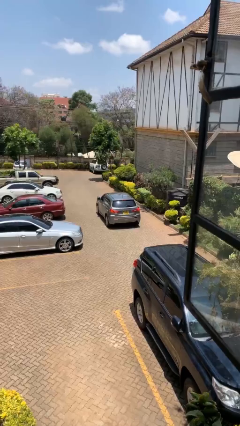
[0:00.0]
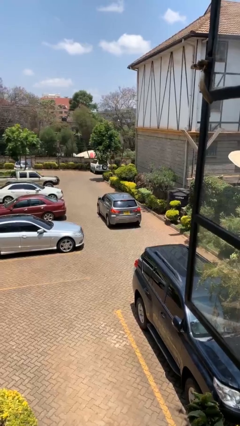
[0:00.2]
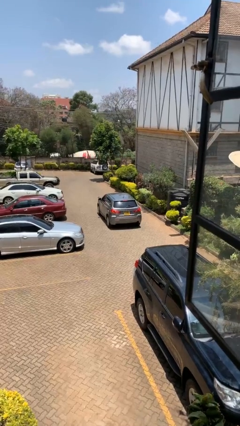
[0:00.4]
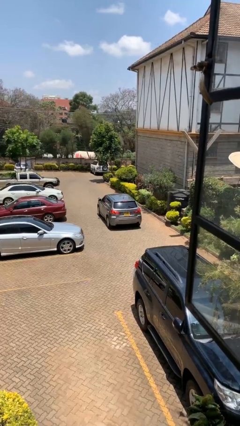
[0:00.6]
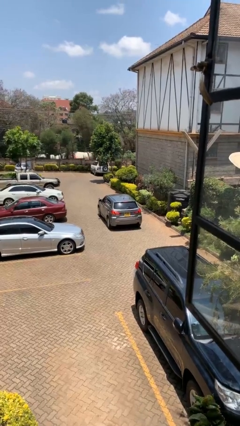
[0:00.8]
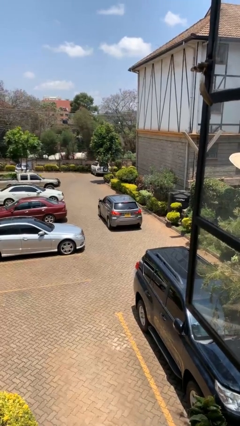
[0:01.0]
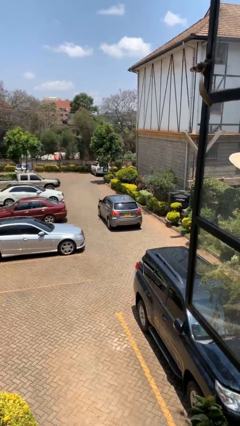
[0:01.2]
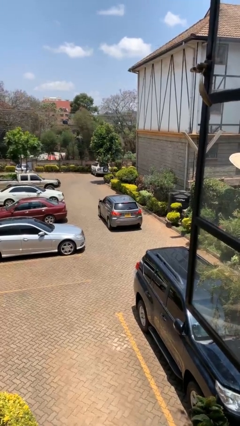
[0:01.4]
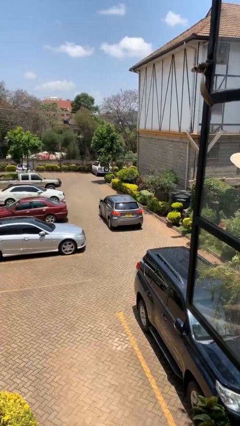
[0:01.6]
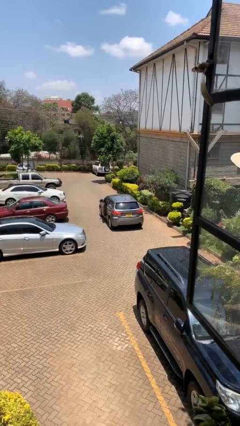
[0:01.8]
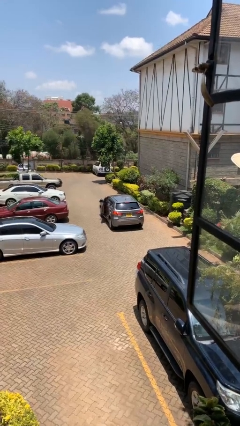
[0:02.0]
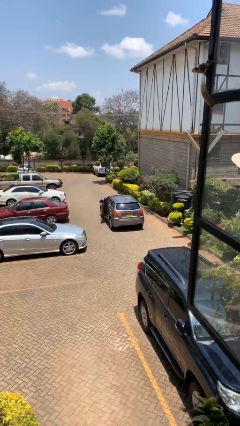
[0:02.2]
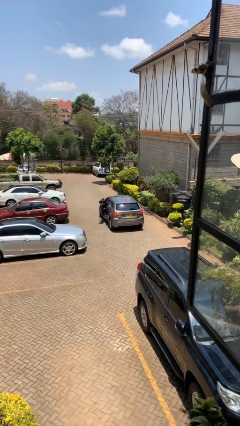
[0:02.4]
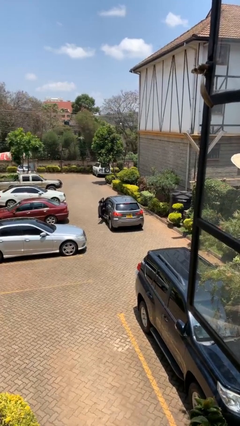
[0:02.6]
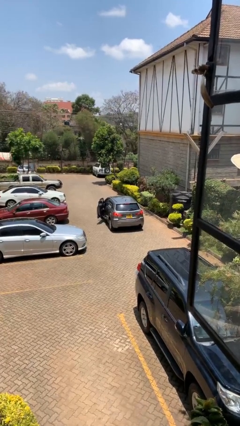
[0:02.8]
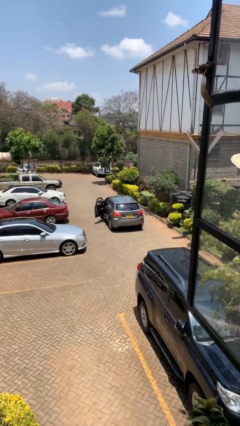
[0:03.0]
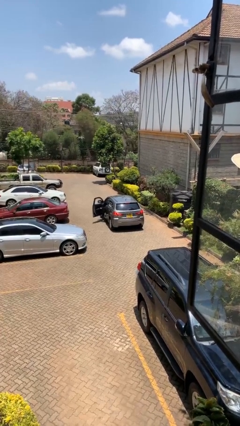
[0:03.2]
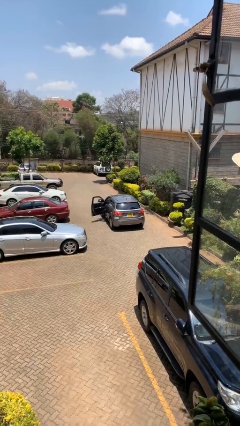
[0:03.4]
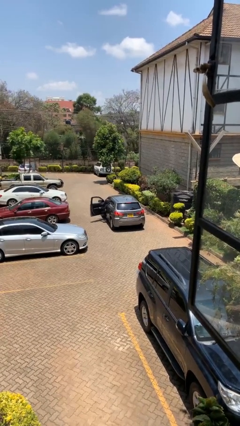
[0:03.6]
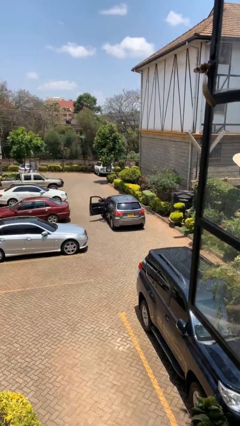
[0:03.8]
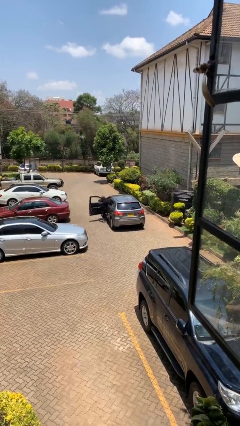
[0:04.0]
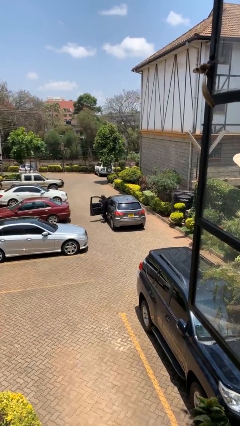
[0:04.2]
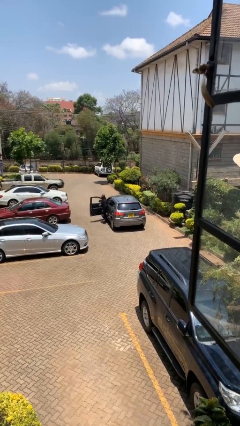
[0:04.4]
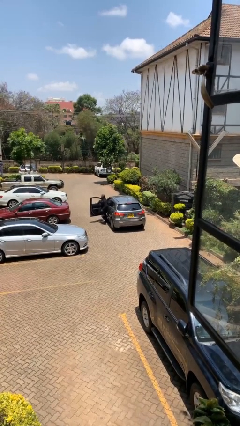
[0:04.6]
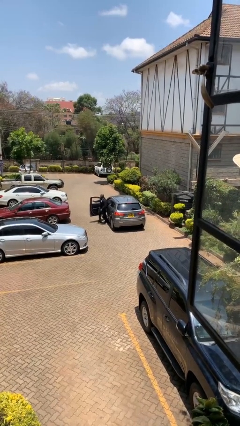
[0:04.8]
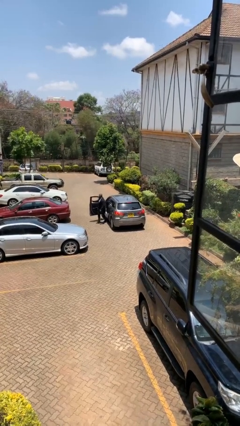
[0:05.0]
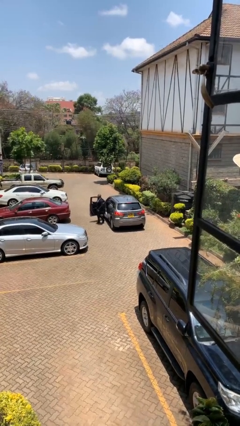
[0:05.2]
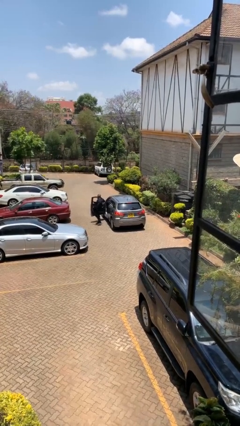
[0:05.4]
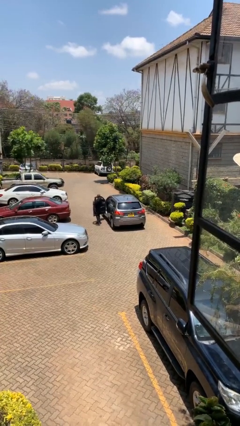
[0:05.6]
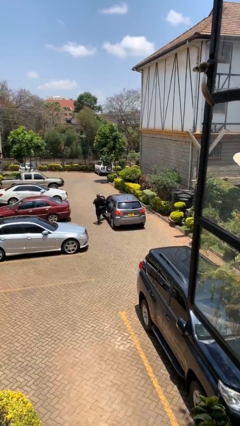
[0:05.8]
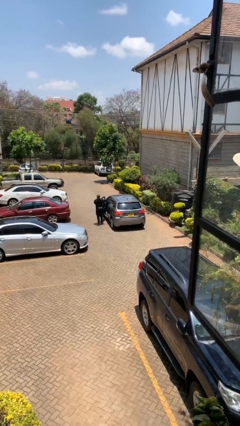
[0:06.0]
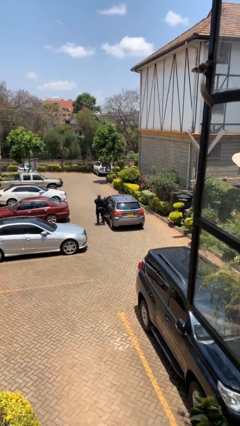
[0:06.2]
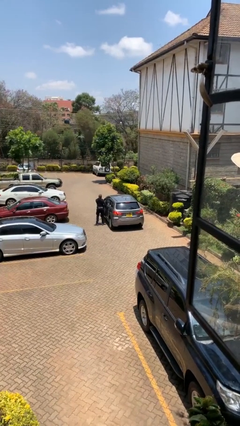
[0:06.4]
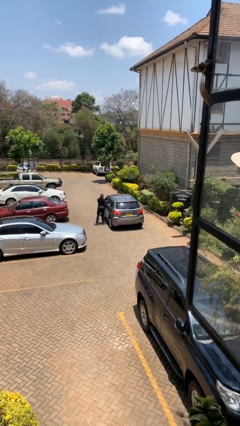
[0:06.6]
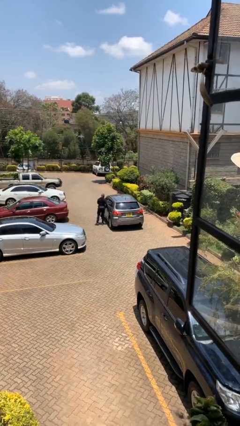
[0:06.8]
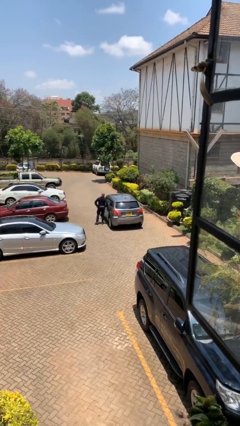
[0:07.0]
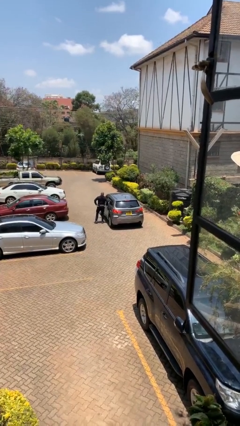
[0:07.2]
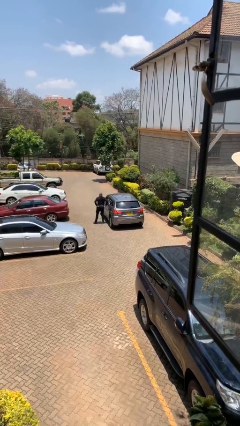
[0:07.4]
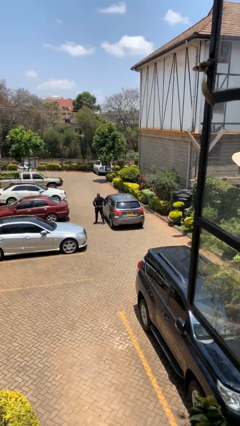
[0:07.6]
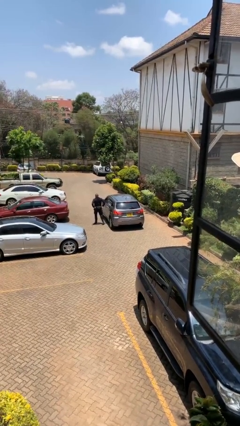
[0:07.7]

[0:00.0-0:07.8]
car drops off person

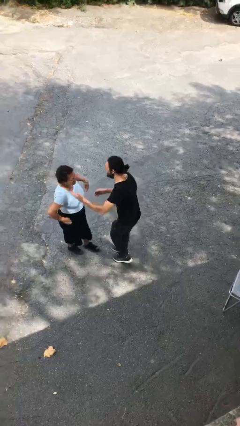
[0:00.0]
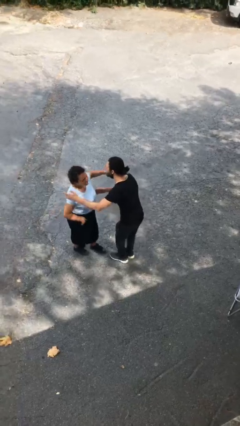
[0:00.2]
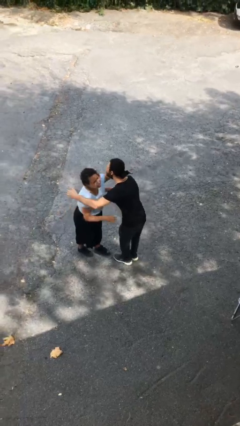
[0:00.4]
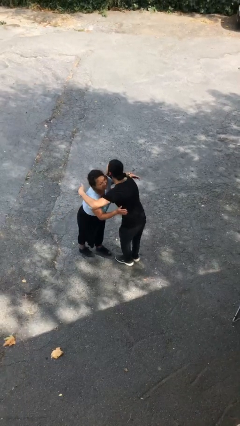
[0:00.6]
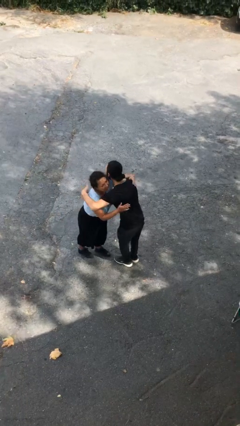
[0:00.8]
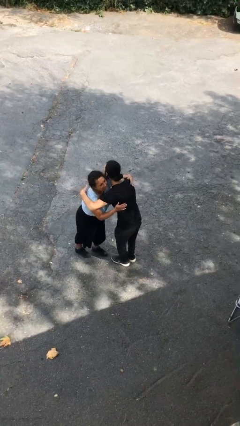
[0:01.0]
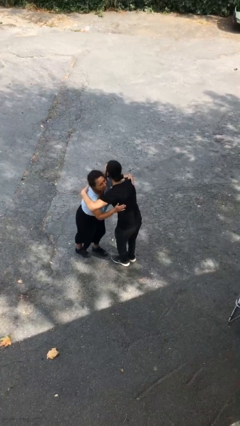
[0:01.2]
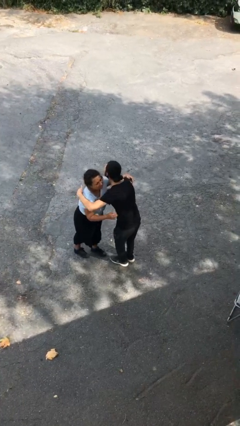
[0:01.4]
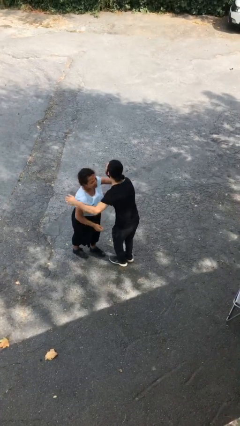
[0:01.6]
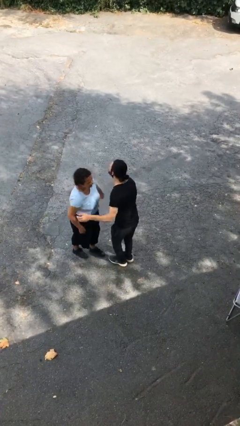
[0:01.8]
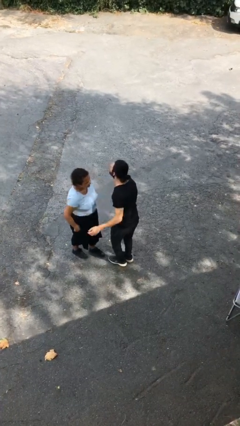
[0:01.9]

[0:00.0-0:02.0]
person embraces person

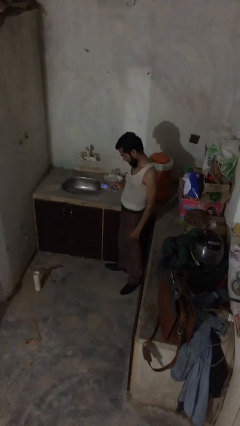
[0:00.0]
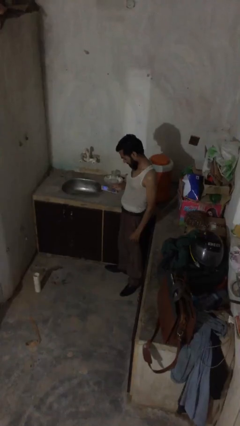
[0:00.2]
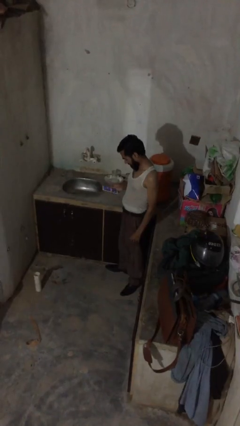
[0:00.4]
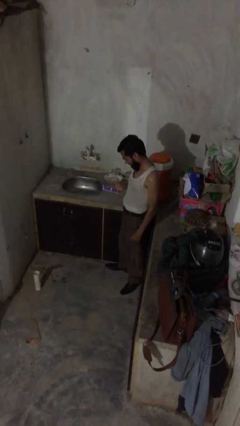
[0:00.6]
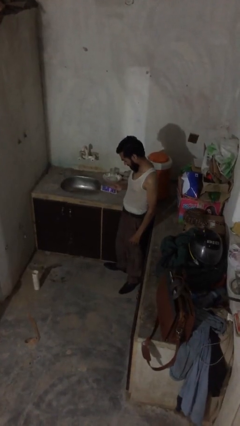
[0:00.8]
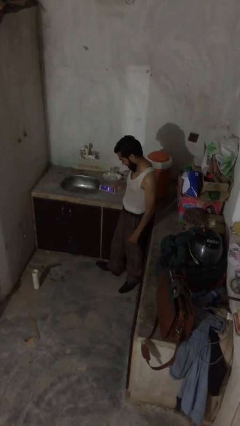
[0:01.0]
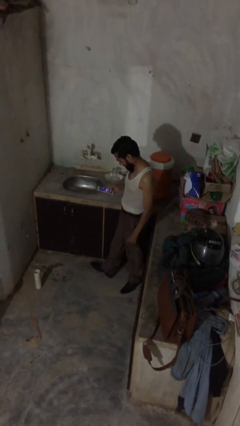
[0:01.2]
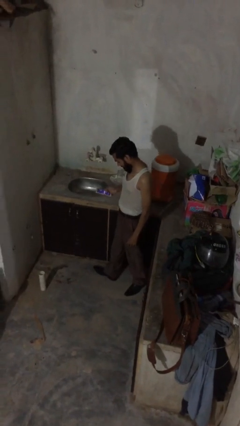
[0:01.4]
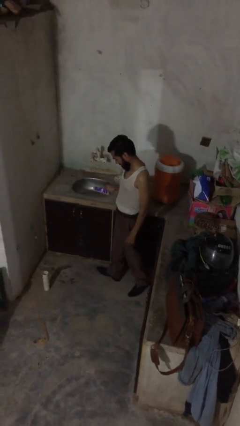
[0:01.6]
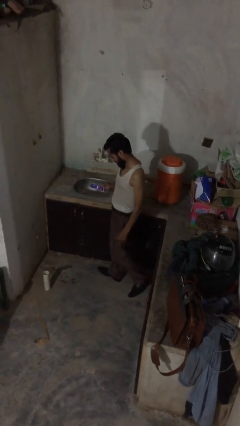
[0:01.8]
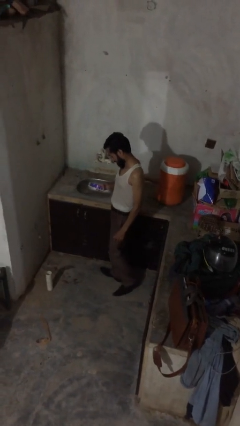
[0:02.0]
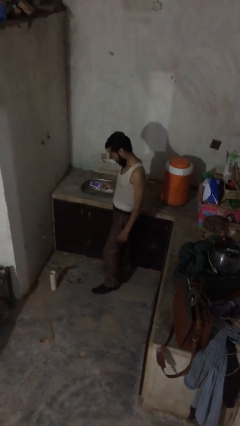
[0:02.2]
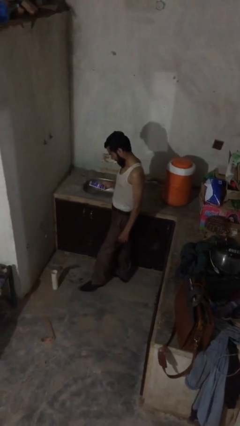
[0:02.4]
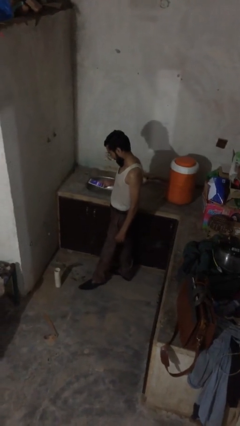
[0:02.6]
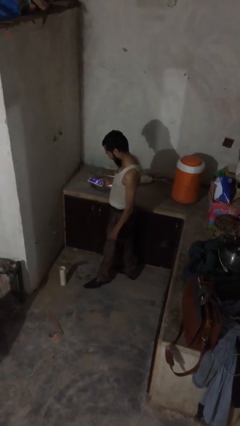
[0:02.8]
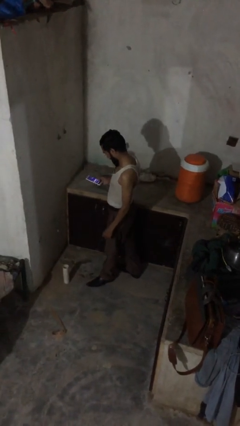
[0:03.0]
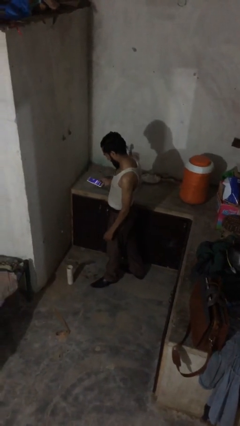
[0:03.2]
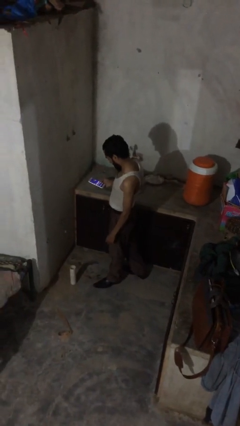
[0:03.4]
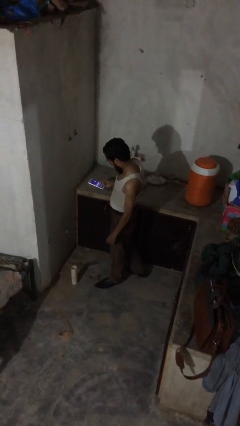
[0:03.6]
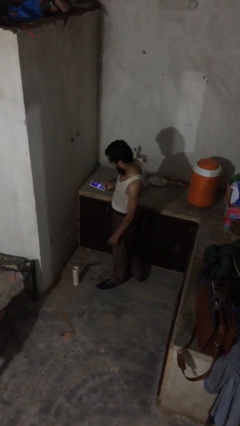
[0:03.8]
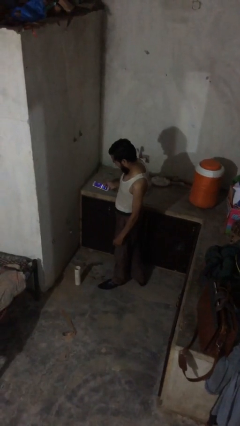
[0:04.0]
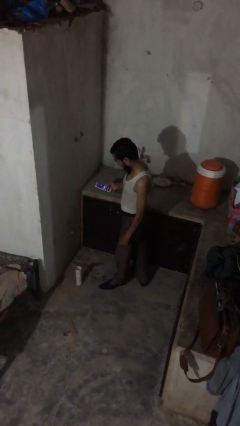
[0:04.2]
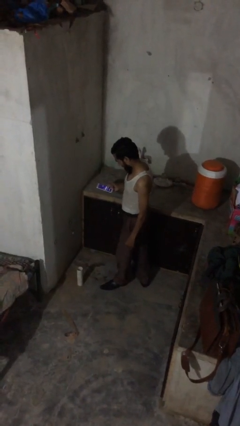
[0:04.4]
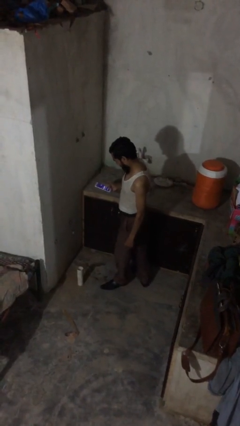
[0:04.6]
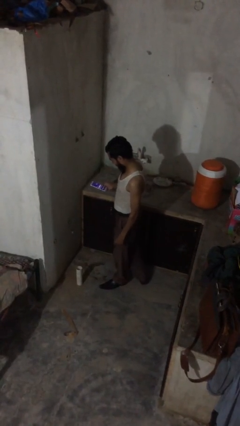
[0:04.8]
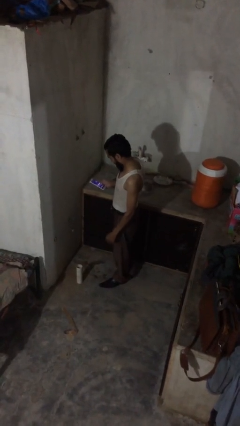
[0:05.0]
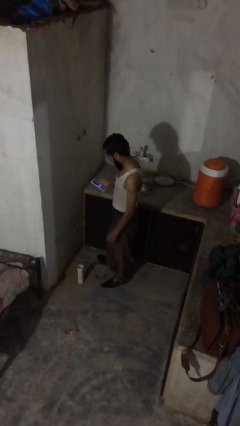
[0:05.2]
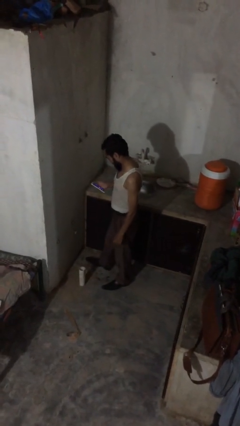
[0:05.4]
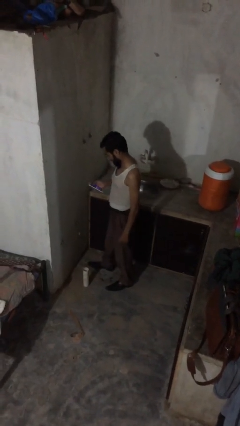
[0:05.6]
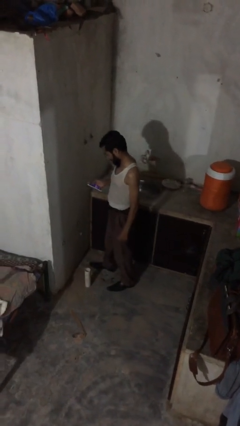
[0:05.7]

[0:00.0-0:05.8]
person texts on phone

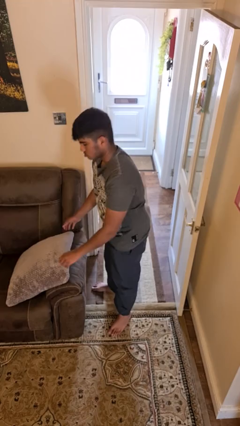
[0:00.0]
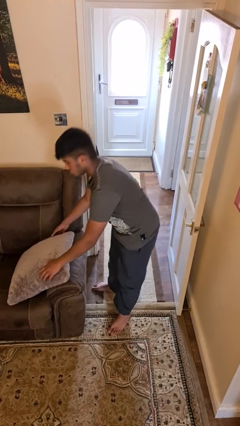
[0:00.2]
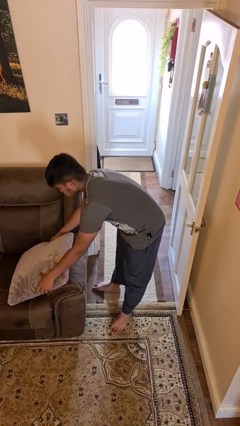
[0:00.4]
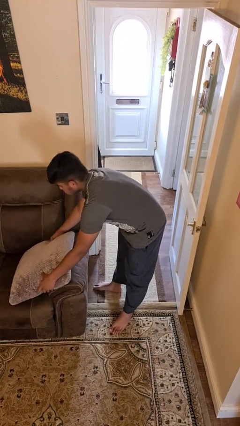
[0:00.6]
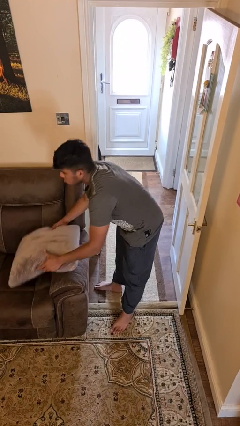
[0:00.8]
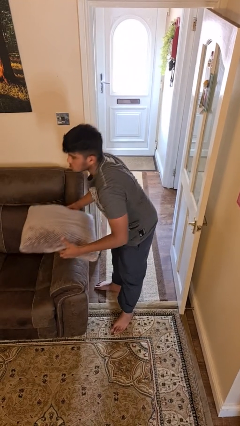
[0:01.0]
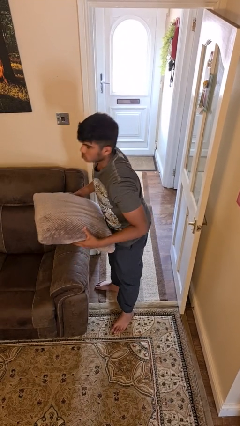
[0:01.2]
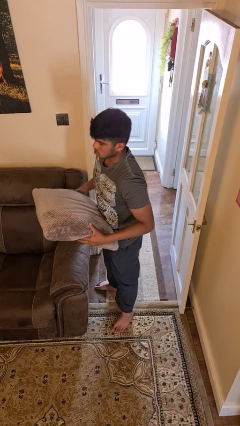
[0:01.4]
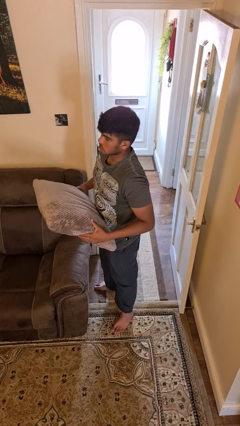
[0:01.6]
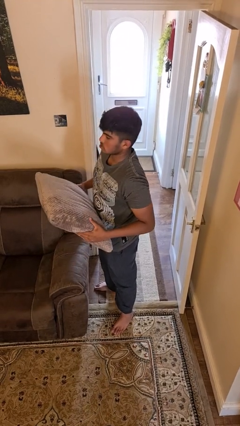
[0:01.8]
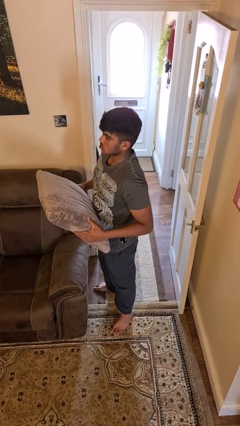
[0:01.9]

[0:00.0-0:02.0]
person picks up object from couch

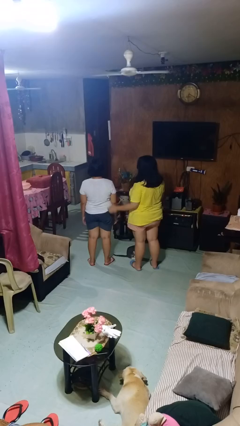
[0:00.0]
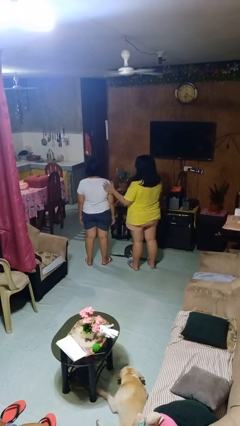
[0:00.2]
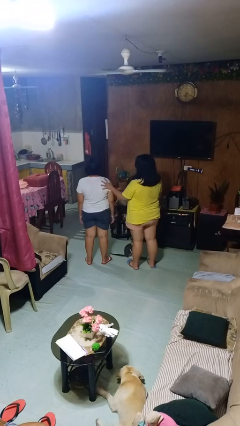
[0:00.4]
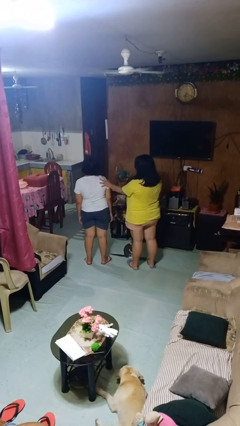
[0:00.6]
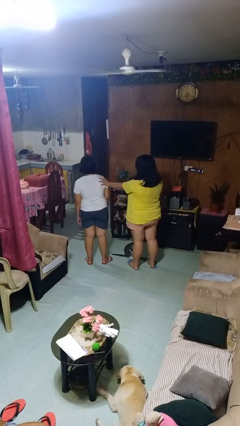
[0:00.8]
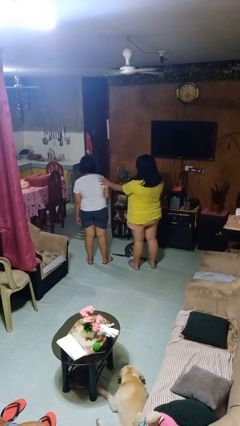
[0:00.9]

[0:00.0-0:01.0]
person shoves person
